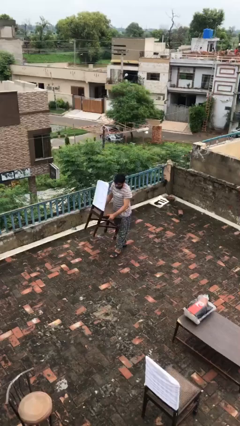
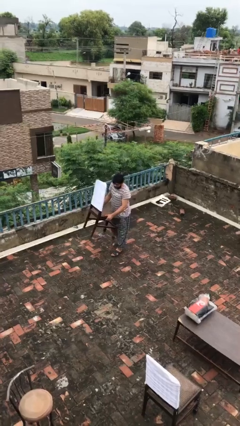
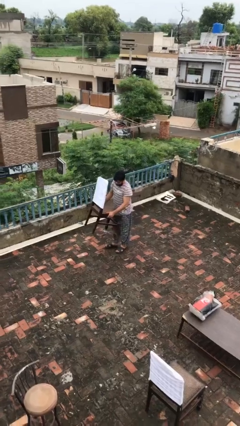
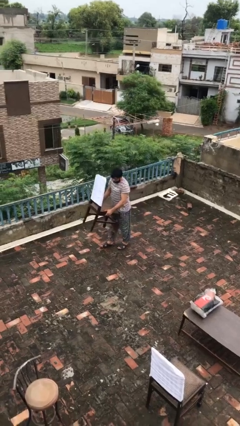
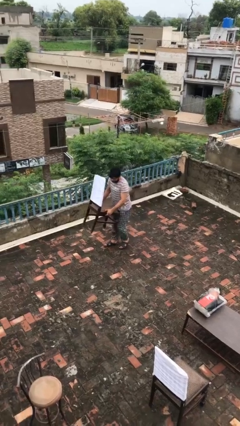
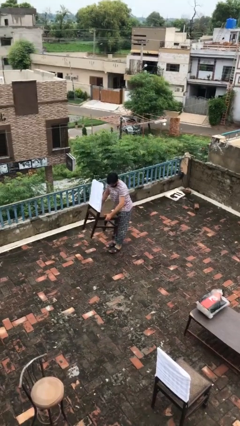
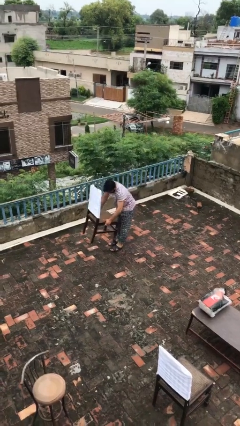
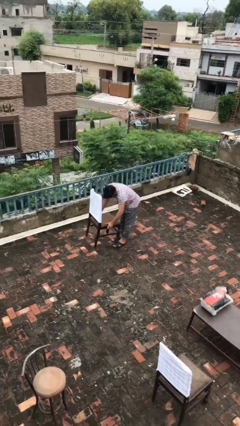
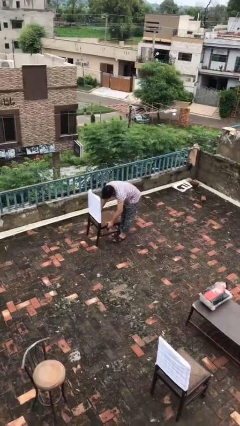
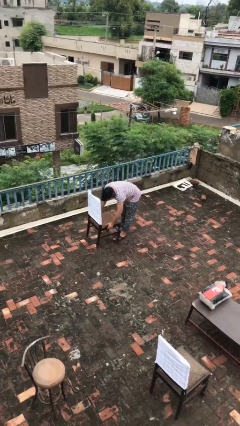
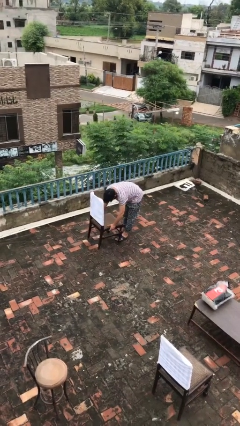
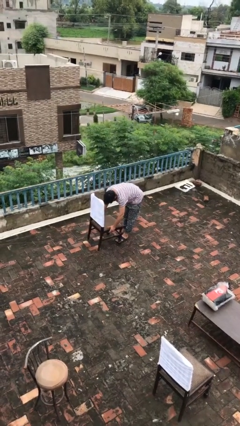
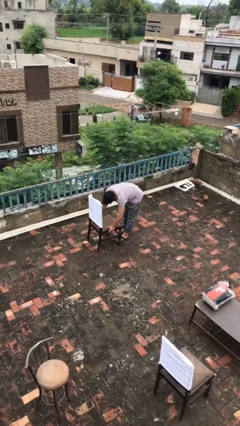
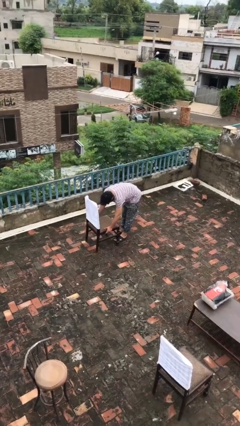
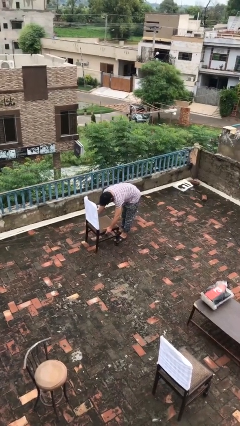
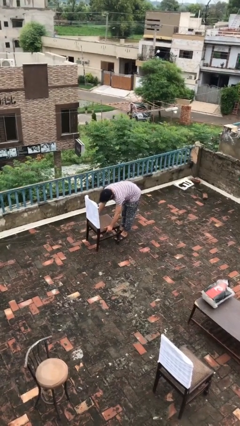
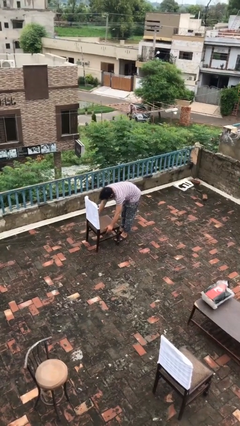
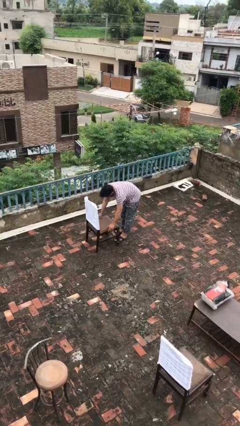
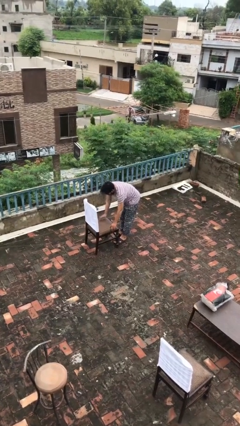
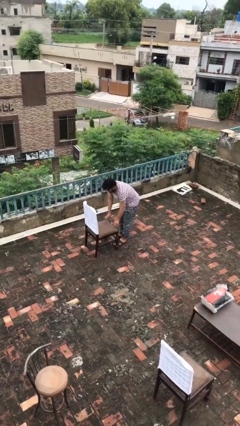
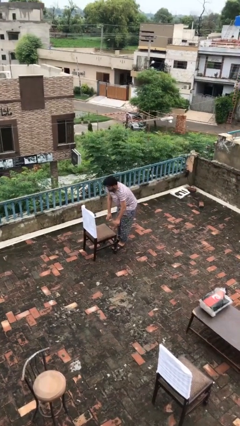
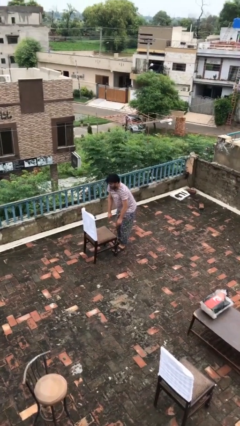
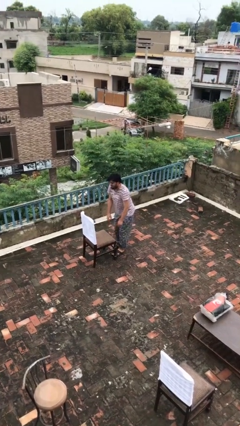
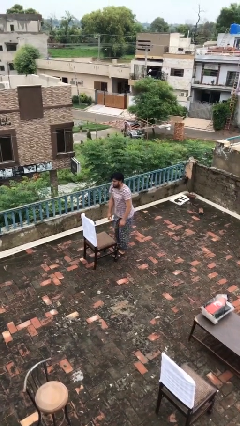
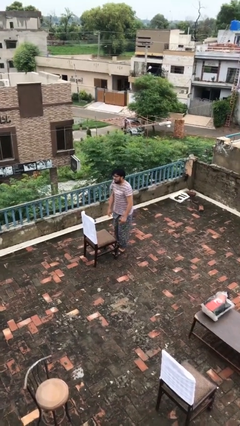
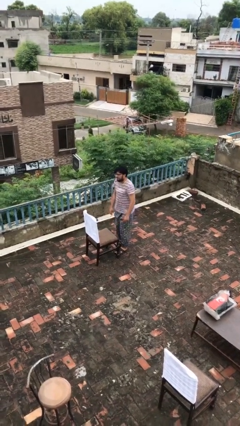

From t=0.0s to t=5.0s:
person puts down object on floor

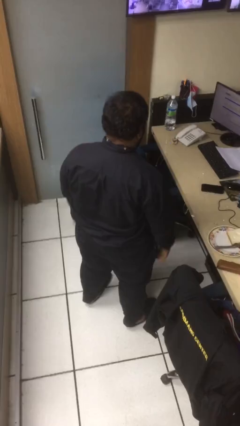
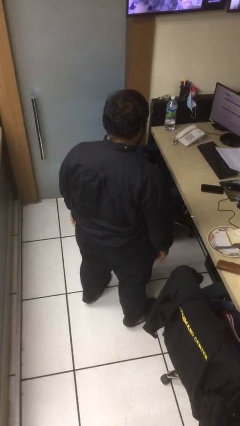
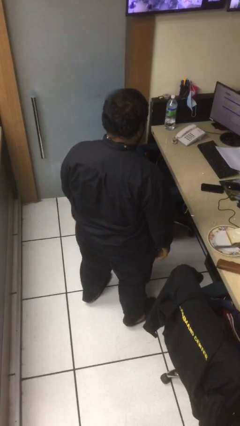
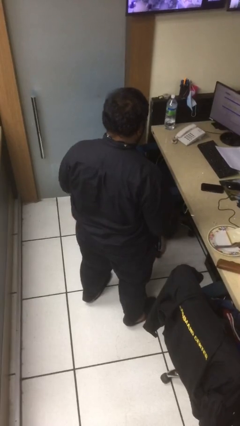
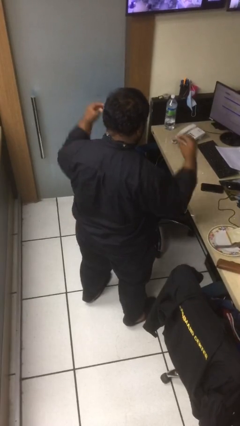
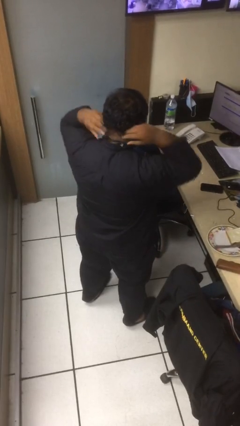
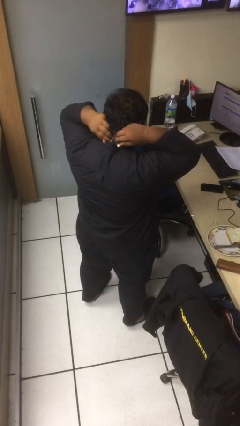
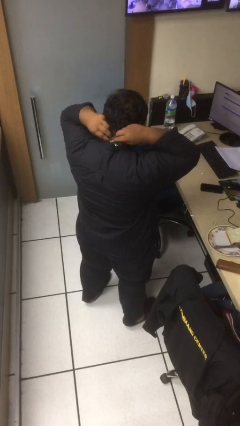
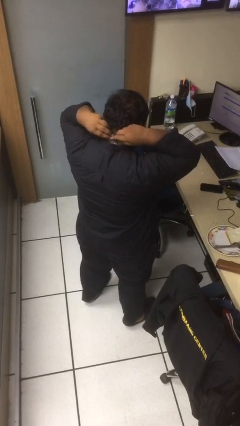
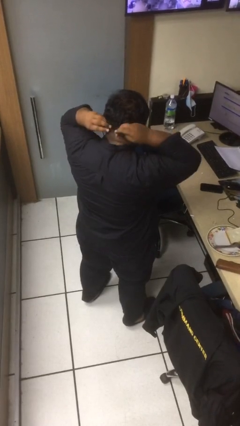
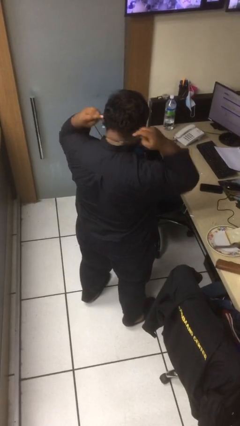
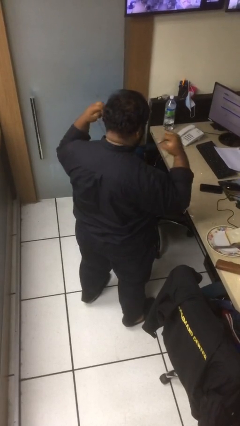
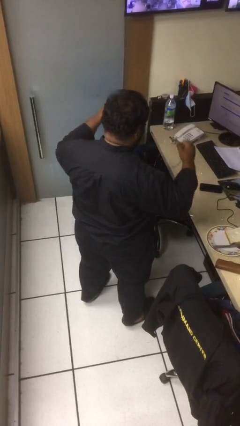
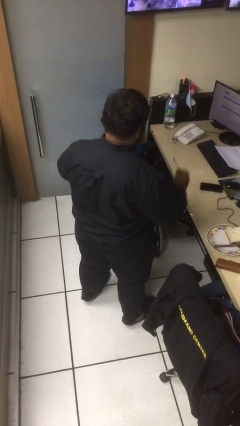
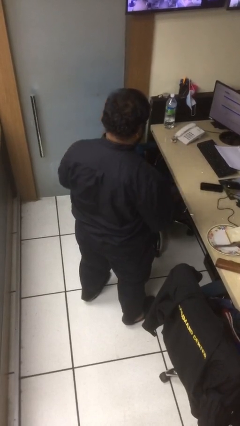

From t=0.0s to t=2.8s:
person takes off necklace

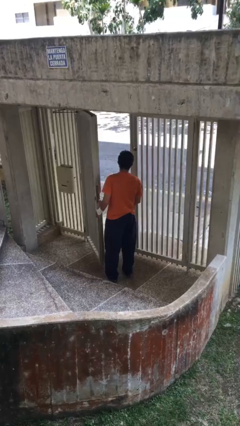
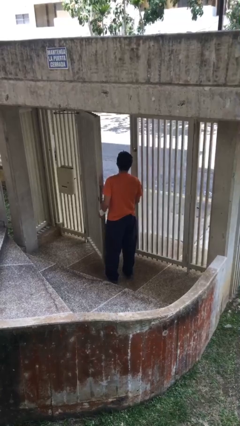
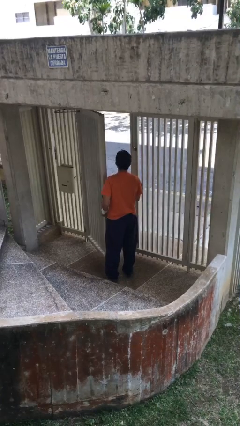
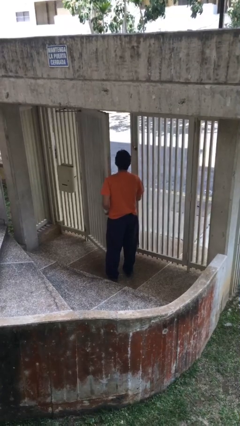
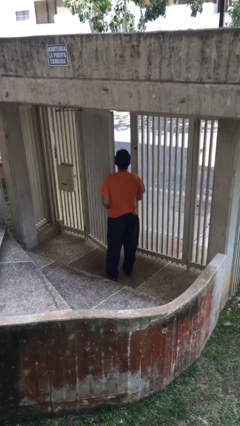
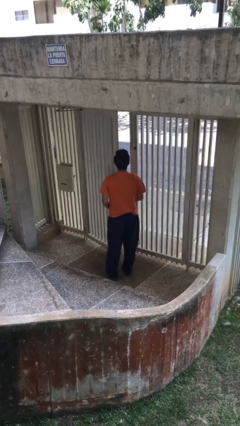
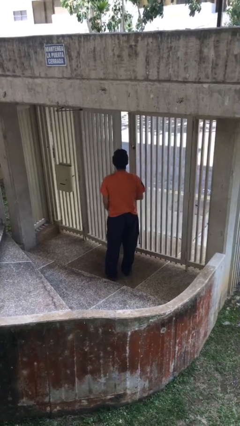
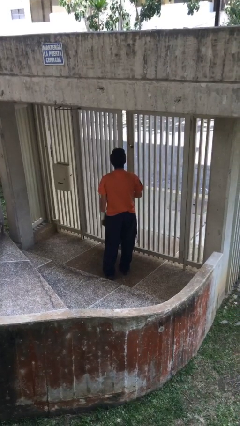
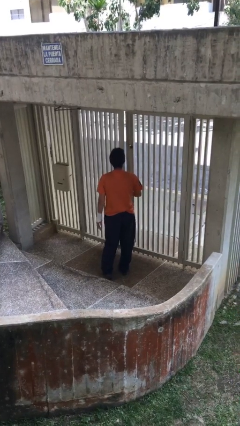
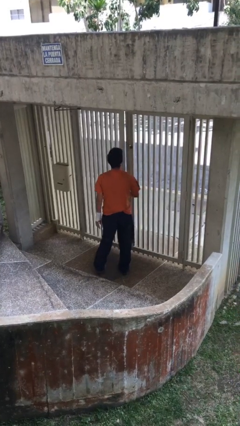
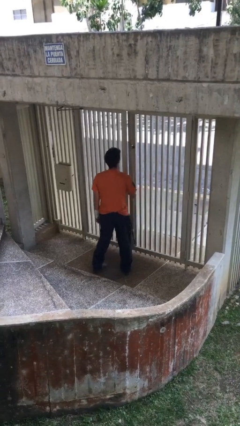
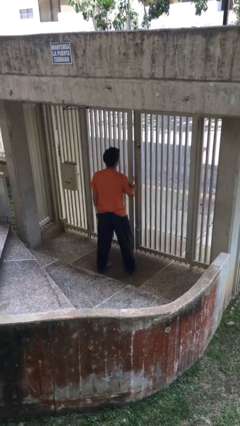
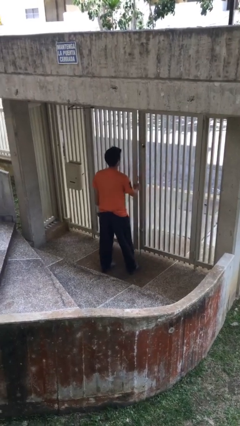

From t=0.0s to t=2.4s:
person closes facility door

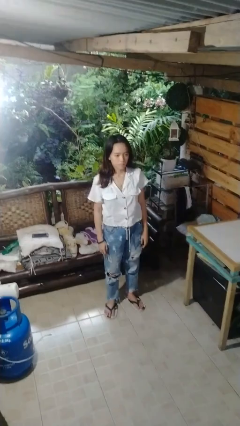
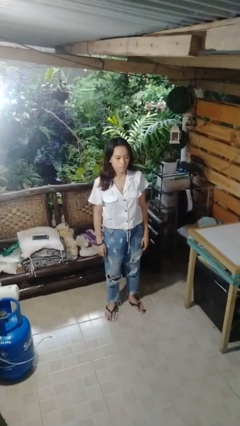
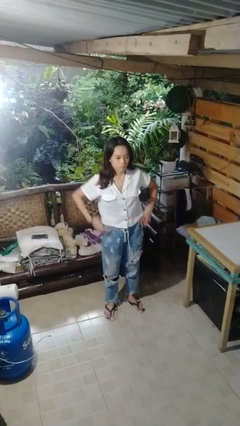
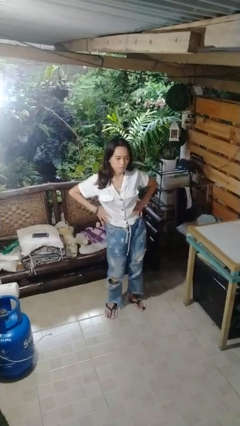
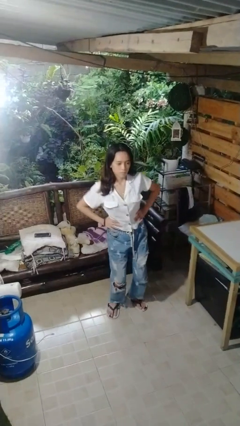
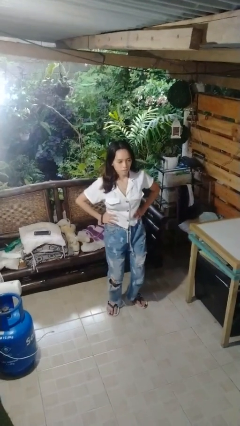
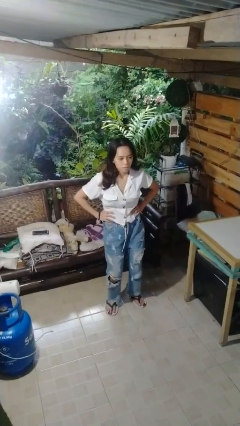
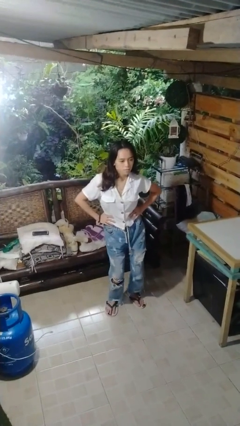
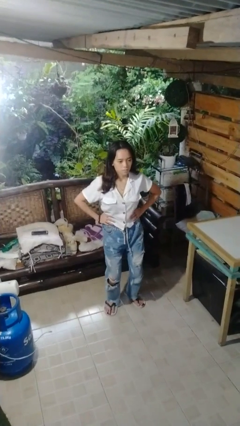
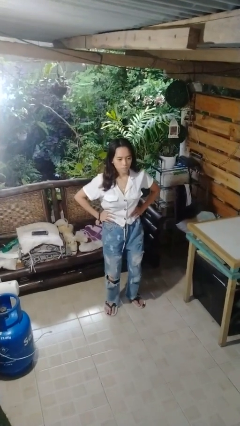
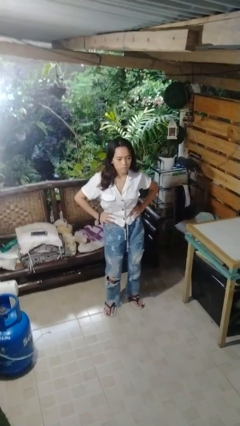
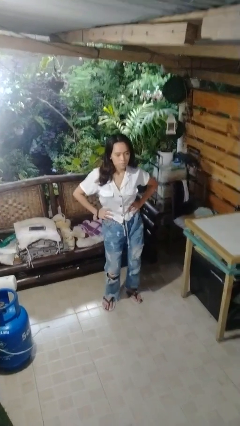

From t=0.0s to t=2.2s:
person wiggles hips

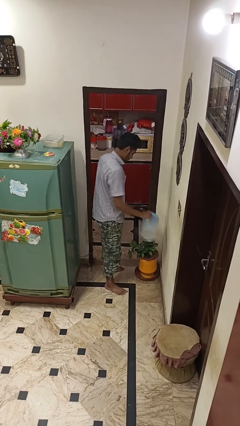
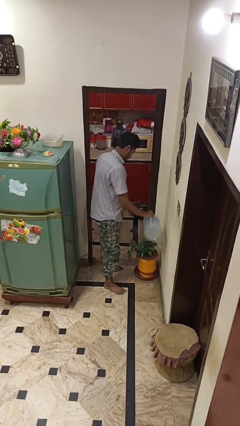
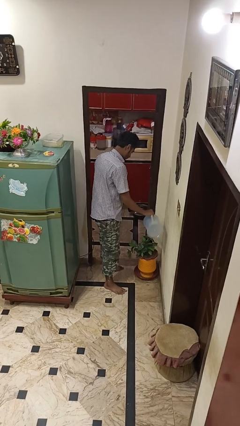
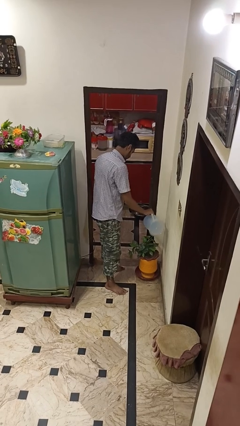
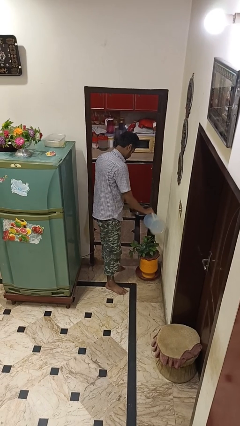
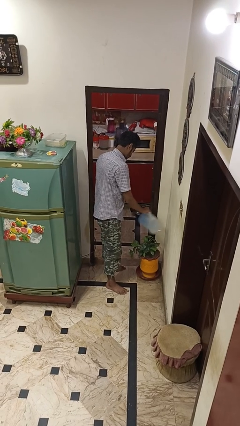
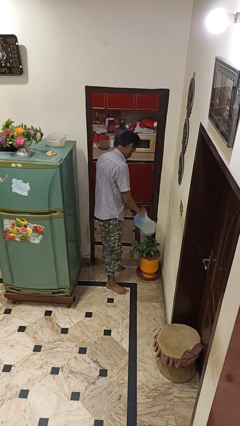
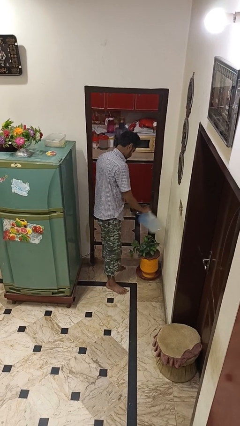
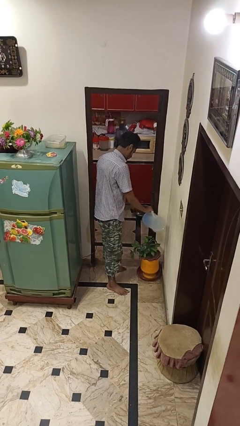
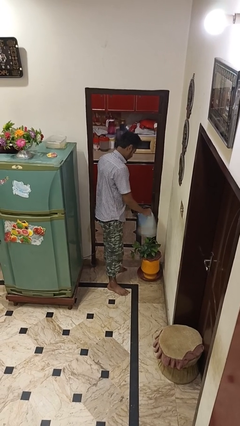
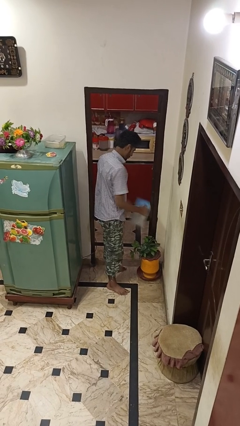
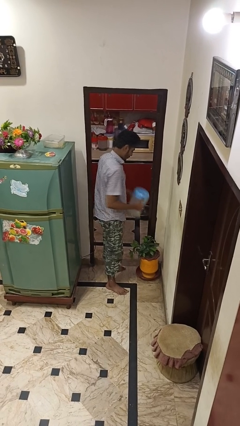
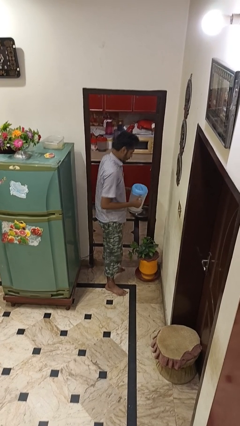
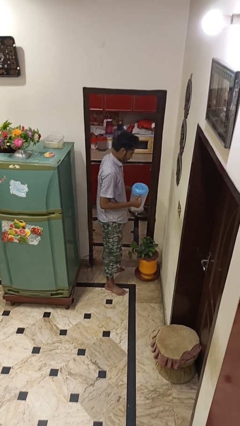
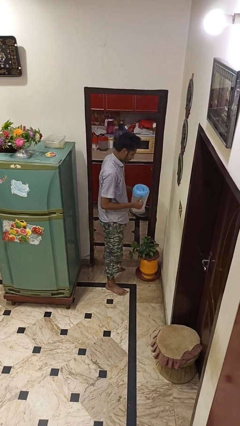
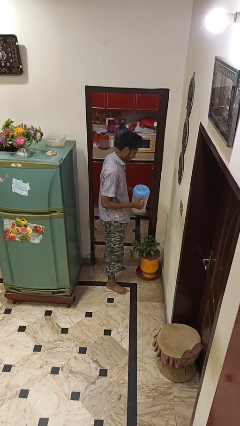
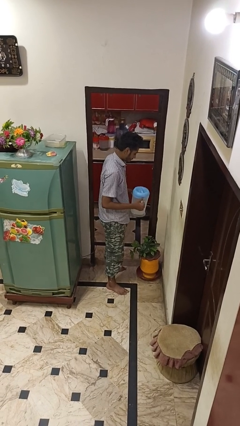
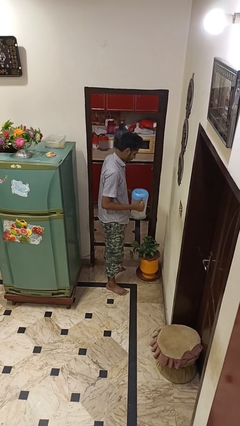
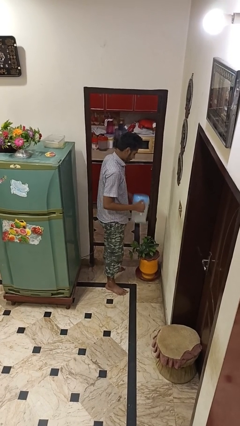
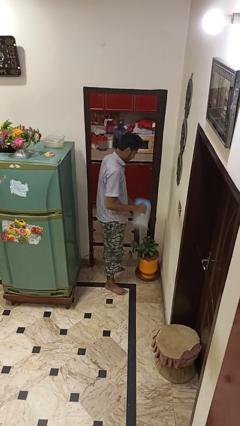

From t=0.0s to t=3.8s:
person waters houseplant

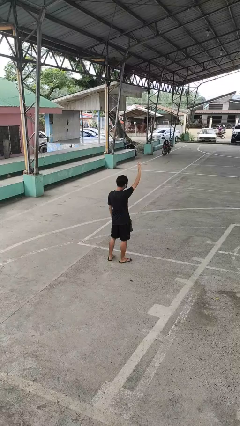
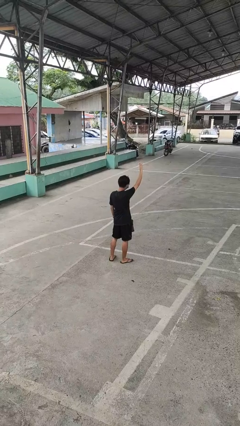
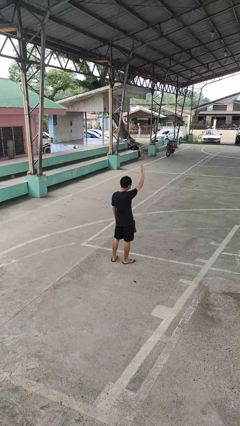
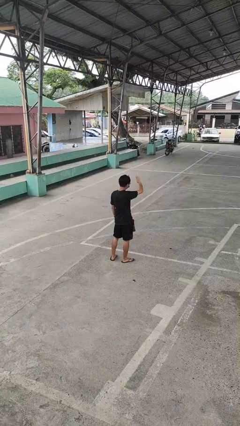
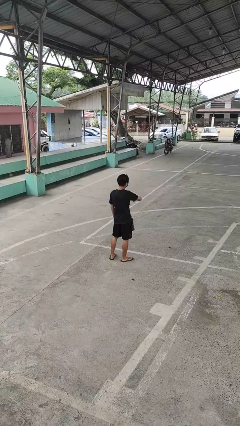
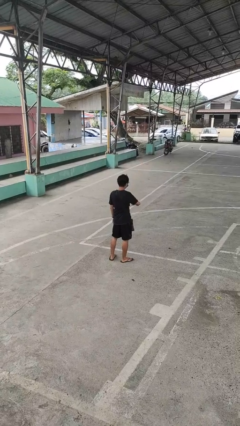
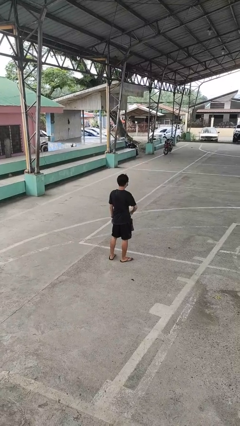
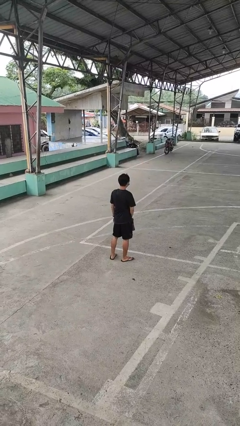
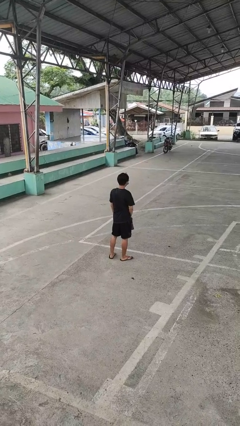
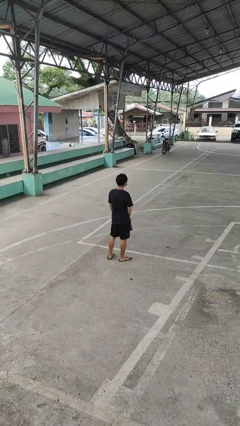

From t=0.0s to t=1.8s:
person gestures swipe down
